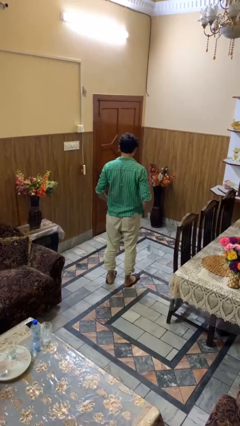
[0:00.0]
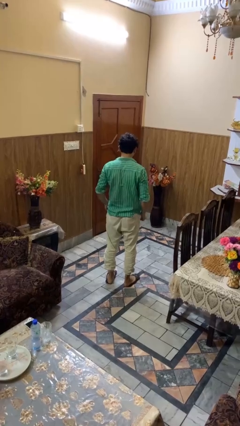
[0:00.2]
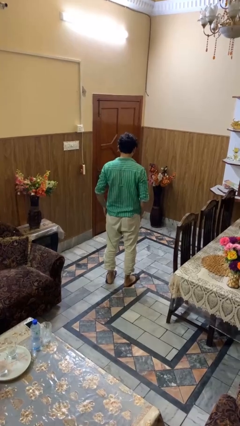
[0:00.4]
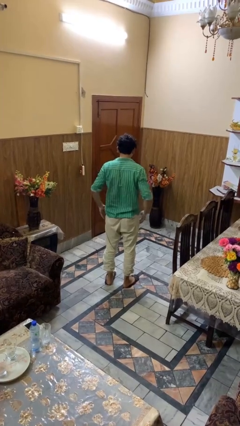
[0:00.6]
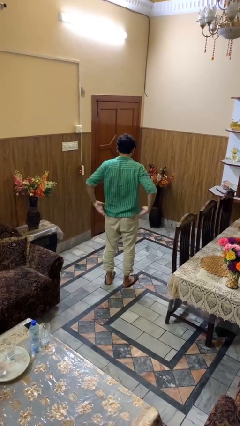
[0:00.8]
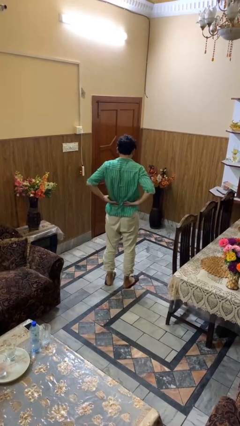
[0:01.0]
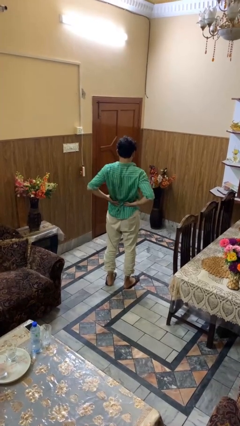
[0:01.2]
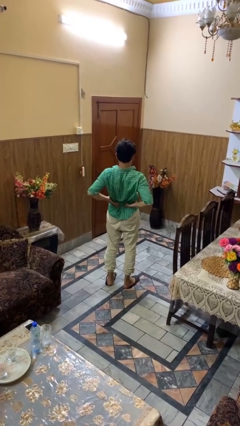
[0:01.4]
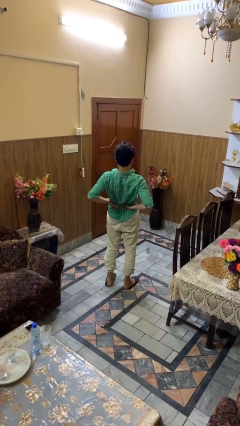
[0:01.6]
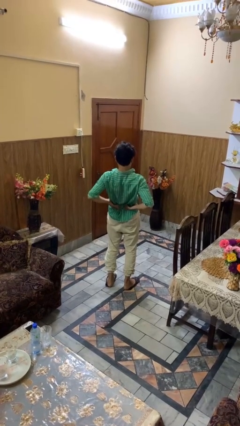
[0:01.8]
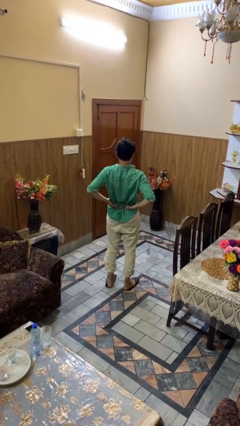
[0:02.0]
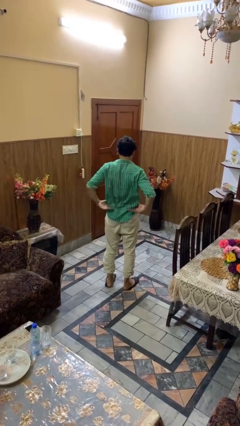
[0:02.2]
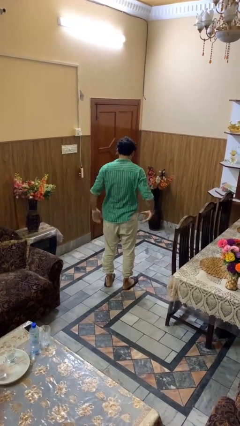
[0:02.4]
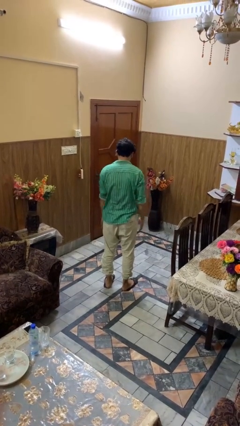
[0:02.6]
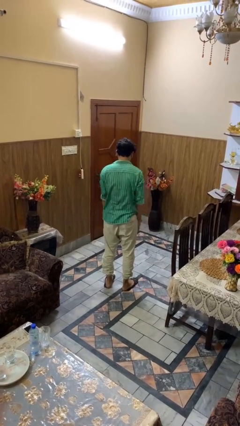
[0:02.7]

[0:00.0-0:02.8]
person stretches back

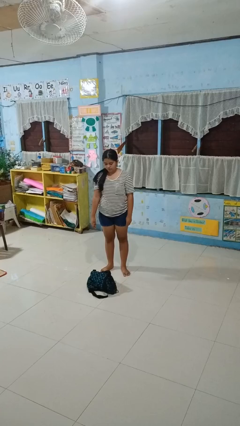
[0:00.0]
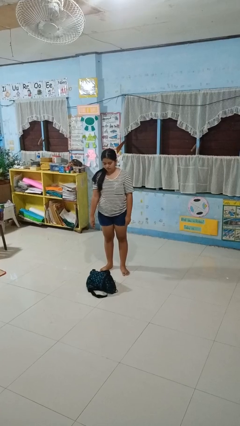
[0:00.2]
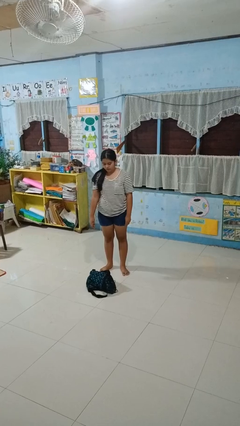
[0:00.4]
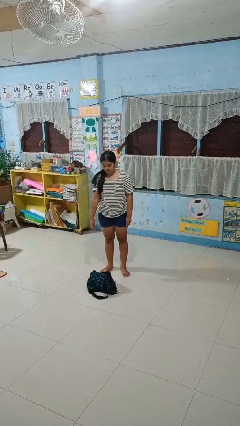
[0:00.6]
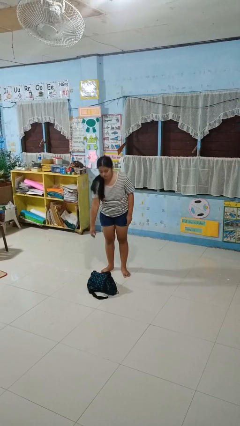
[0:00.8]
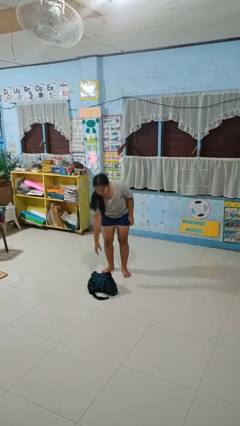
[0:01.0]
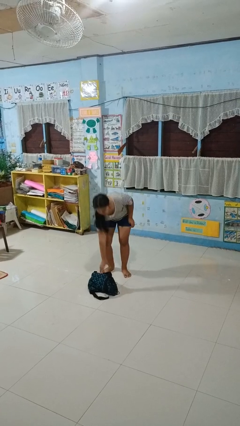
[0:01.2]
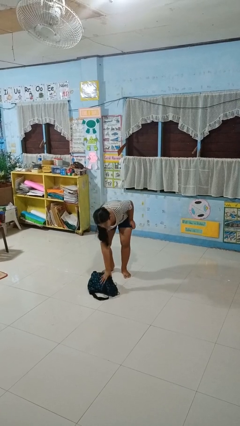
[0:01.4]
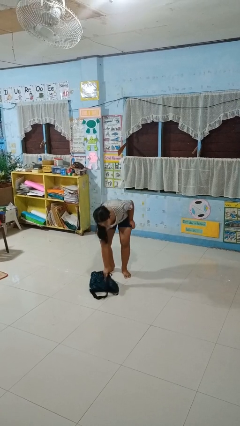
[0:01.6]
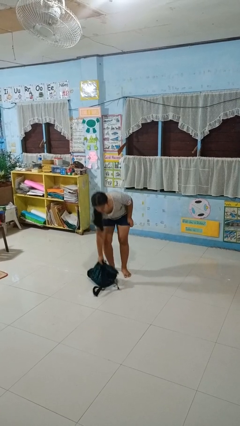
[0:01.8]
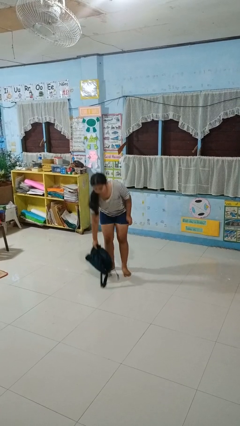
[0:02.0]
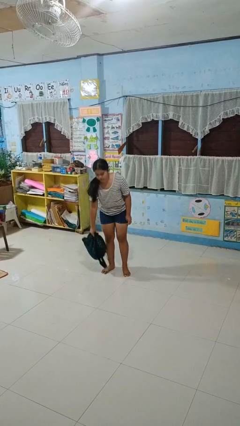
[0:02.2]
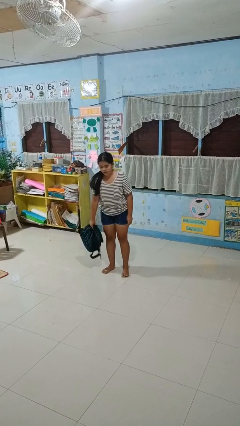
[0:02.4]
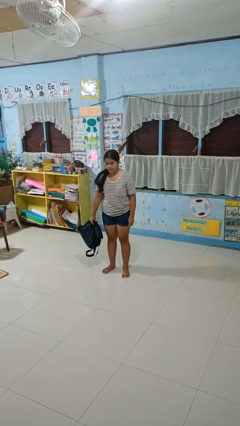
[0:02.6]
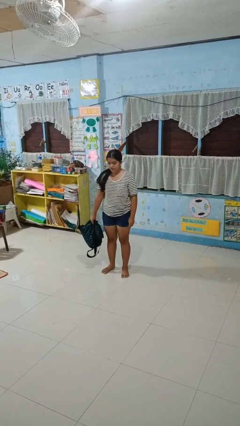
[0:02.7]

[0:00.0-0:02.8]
person picks up object from floor

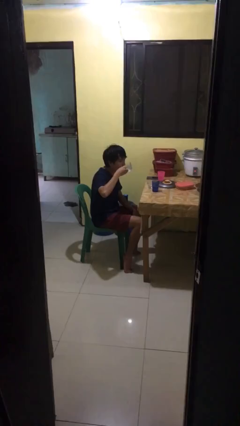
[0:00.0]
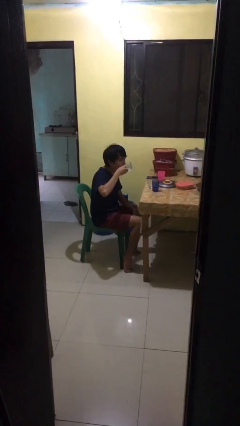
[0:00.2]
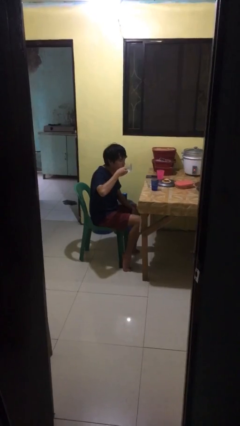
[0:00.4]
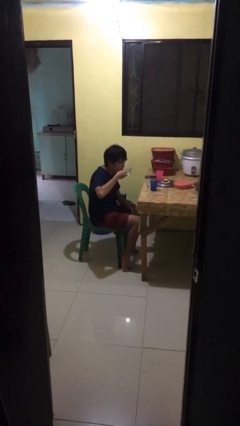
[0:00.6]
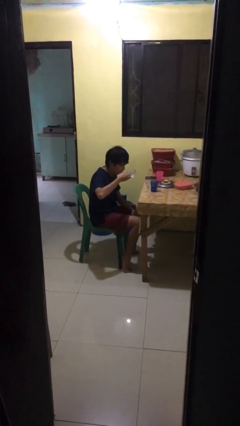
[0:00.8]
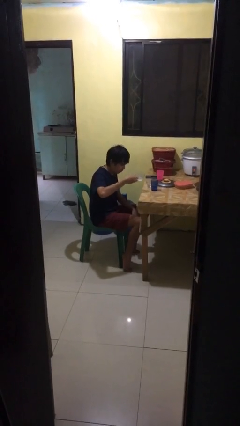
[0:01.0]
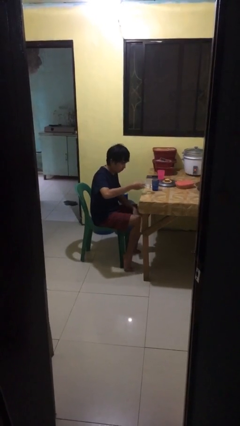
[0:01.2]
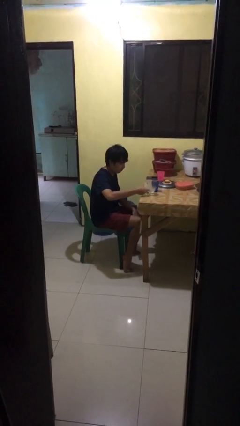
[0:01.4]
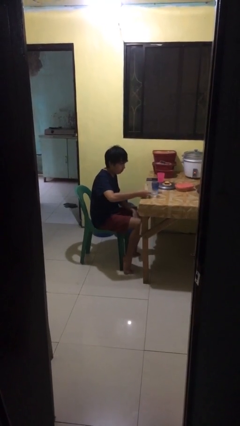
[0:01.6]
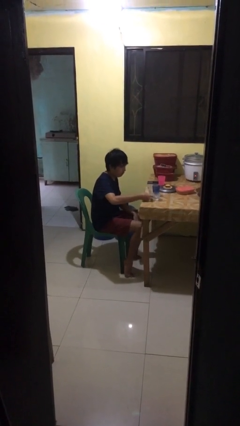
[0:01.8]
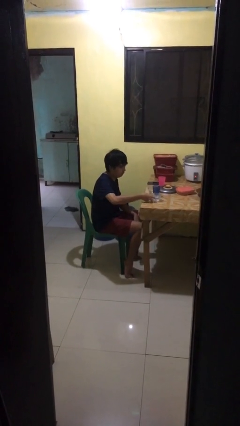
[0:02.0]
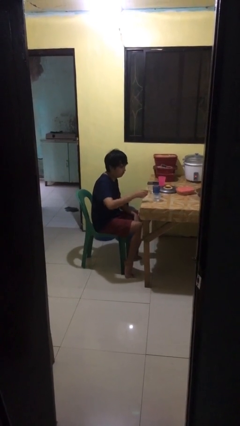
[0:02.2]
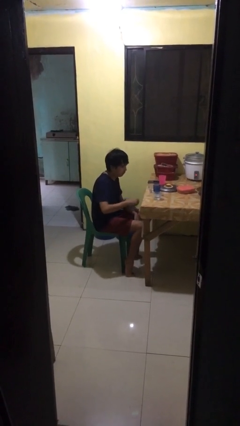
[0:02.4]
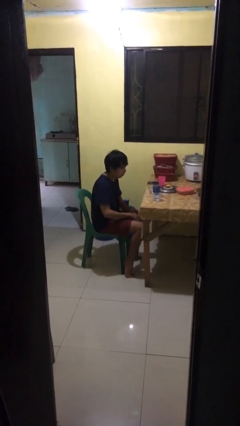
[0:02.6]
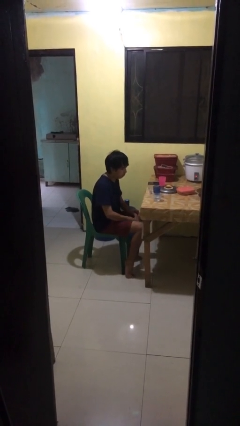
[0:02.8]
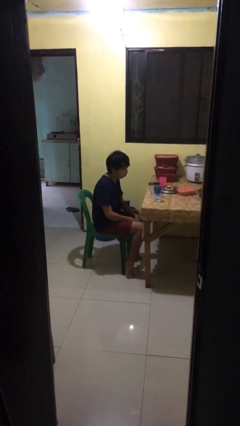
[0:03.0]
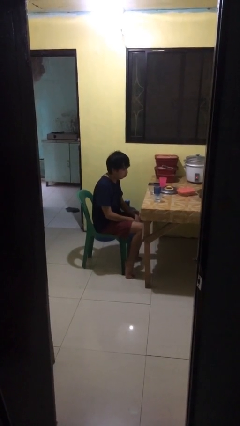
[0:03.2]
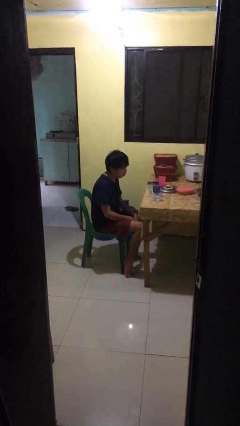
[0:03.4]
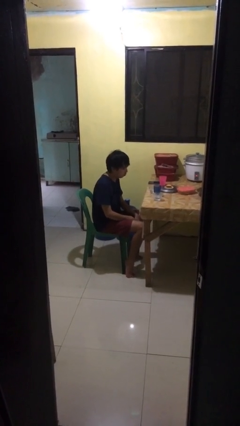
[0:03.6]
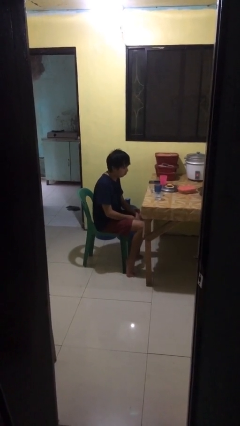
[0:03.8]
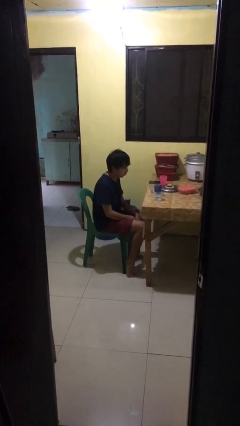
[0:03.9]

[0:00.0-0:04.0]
person puts down object on table

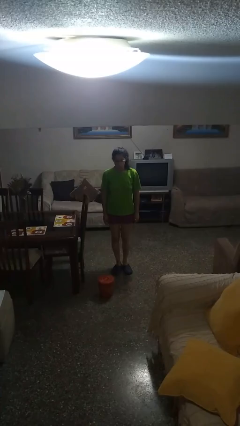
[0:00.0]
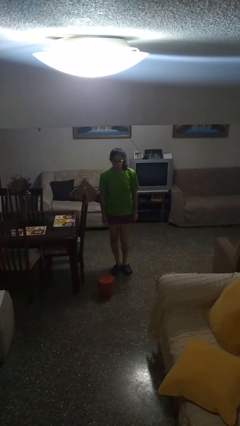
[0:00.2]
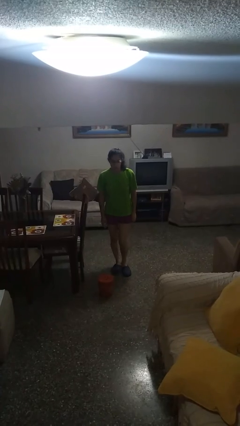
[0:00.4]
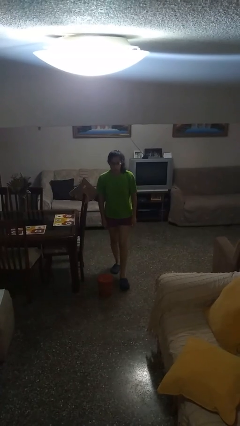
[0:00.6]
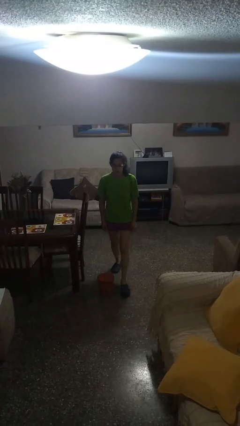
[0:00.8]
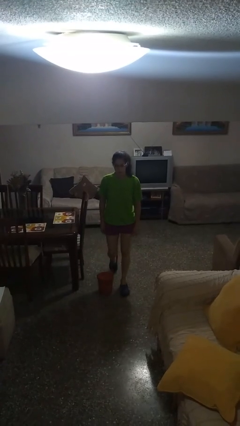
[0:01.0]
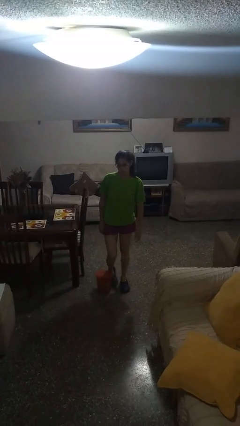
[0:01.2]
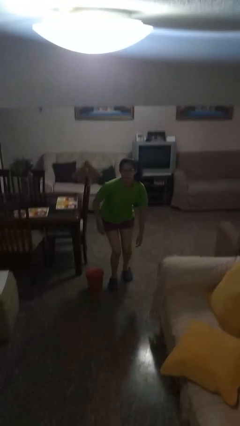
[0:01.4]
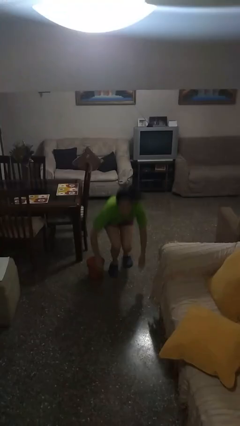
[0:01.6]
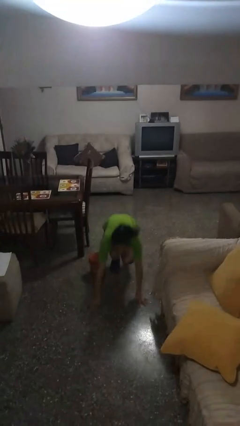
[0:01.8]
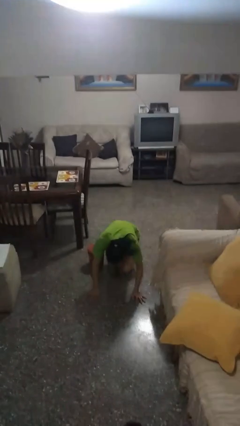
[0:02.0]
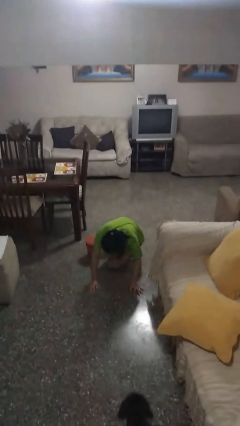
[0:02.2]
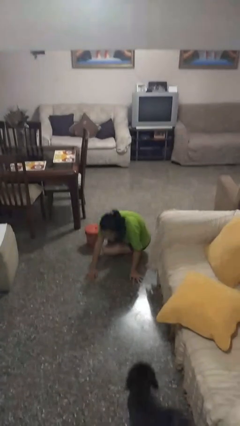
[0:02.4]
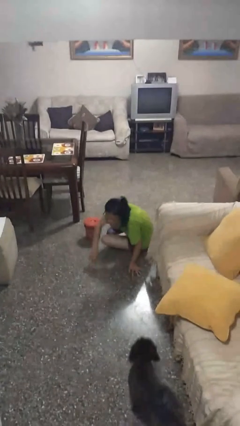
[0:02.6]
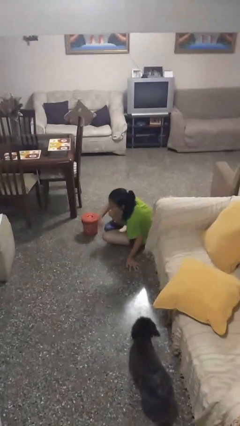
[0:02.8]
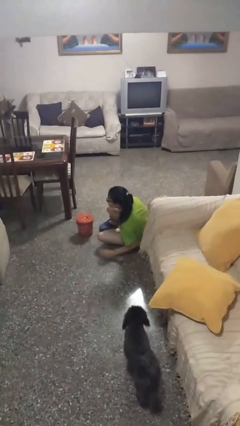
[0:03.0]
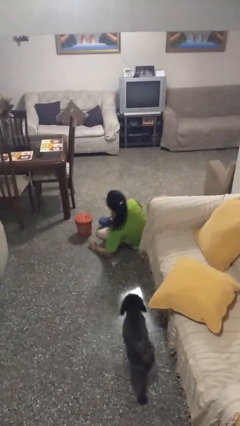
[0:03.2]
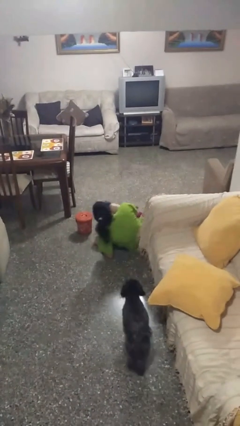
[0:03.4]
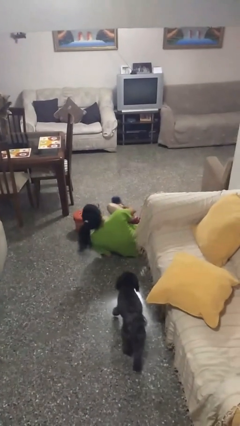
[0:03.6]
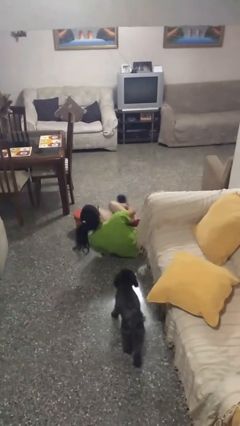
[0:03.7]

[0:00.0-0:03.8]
person trips on object on floor

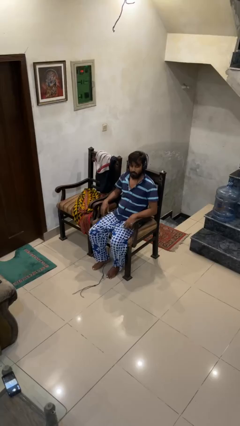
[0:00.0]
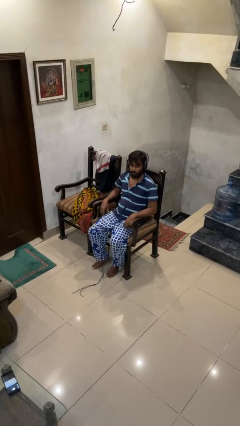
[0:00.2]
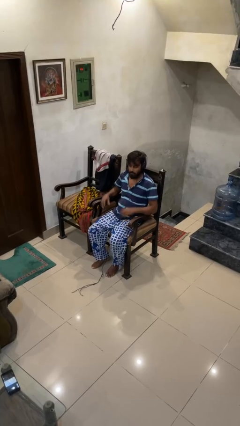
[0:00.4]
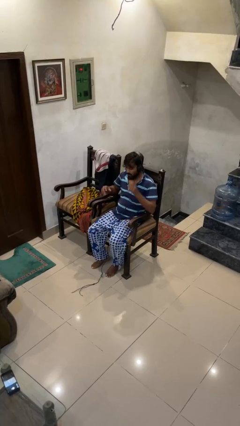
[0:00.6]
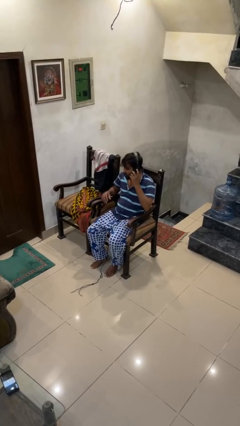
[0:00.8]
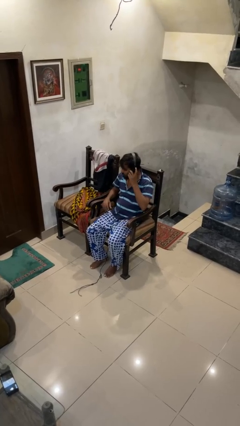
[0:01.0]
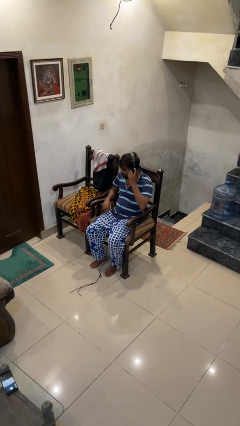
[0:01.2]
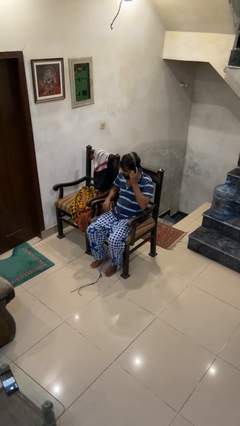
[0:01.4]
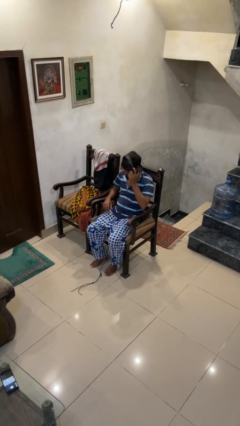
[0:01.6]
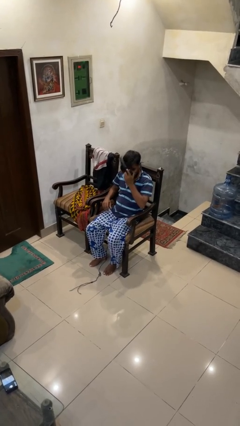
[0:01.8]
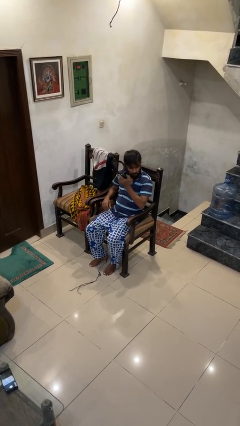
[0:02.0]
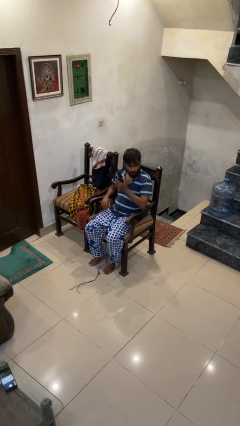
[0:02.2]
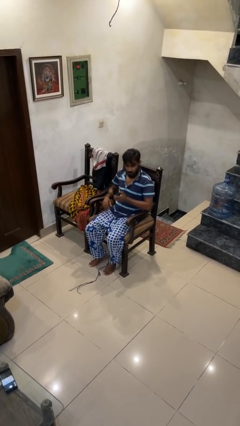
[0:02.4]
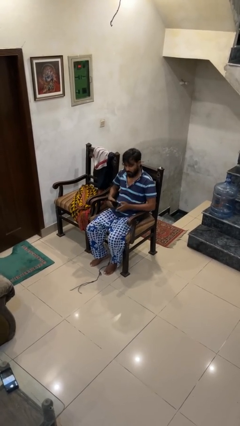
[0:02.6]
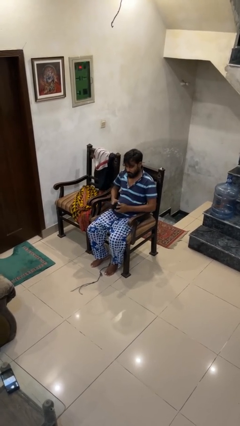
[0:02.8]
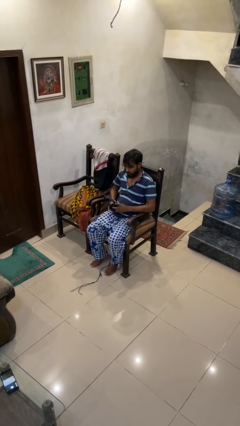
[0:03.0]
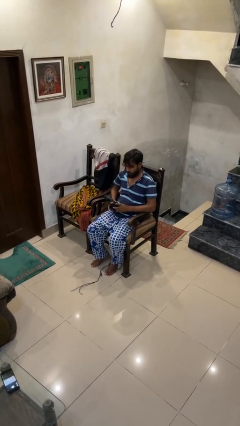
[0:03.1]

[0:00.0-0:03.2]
person takes off headphones

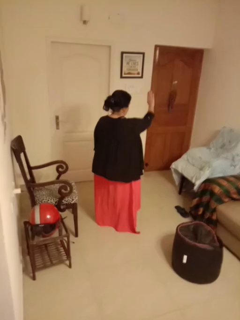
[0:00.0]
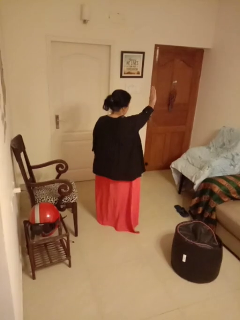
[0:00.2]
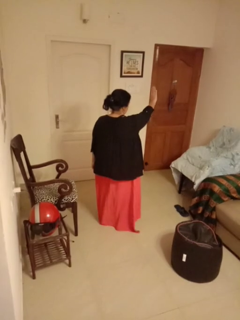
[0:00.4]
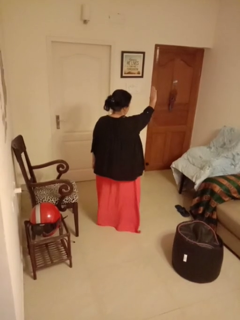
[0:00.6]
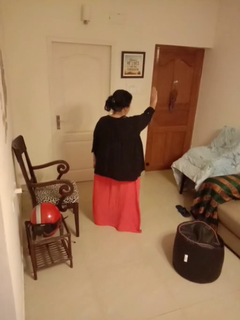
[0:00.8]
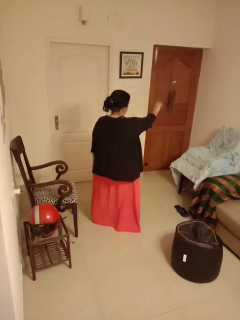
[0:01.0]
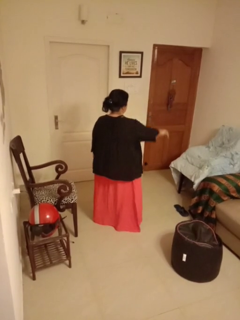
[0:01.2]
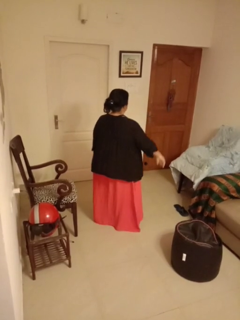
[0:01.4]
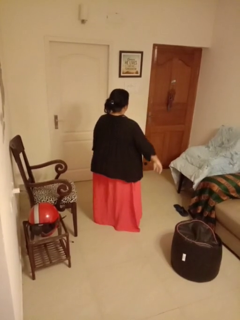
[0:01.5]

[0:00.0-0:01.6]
person gestures stop

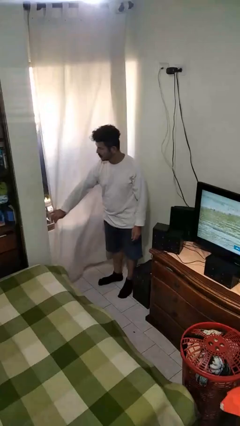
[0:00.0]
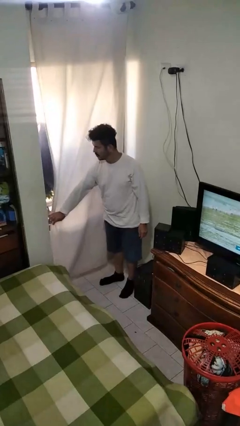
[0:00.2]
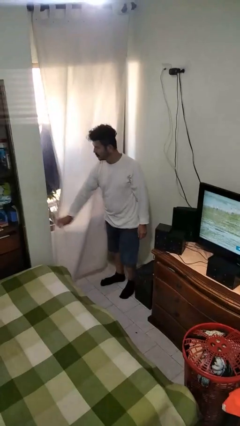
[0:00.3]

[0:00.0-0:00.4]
person closes curtains
